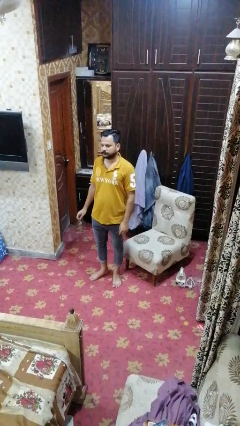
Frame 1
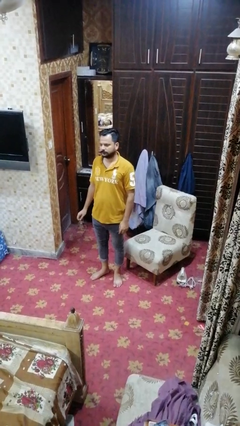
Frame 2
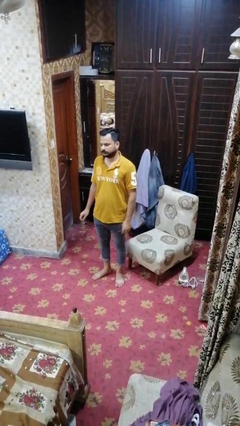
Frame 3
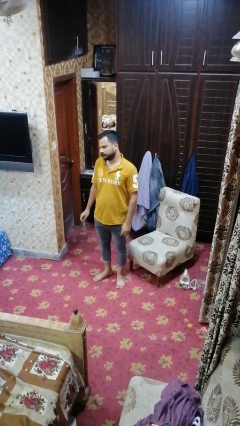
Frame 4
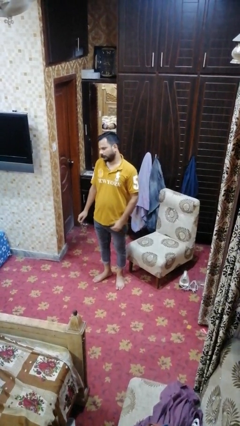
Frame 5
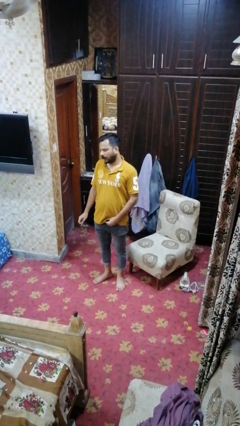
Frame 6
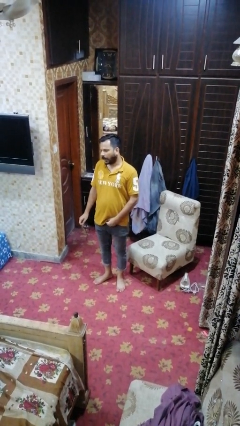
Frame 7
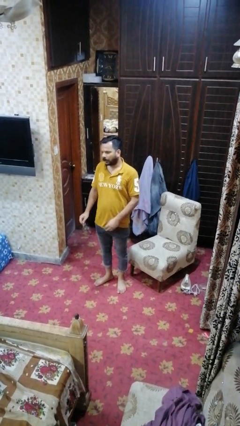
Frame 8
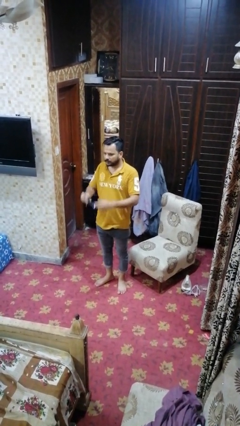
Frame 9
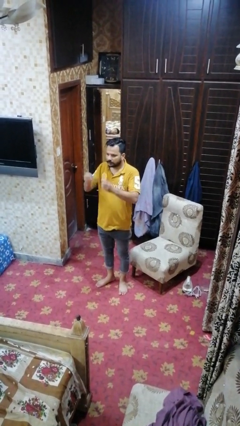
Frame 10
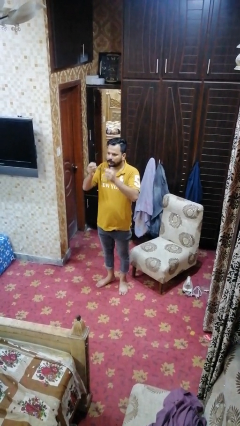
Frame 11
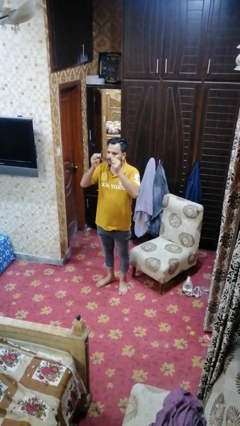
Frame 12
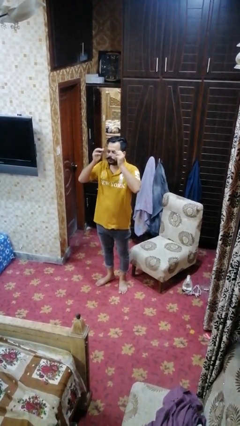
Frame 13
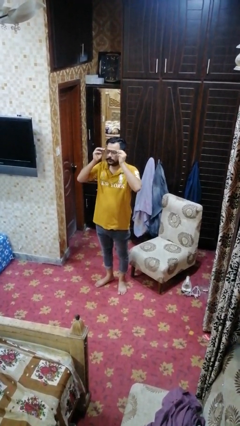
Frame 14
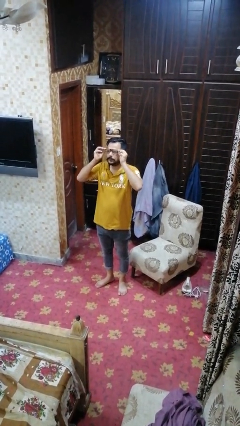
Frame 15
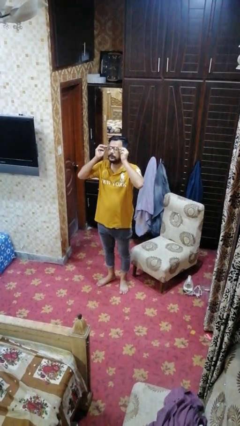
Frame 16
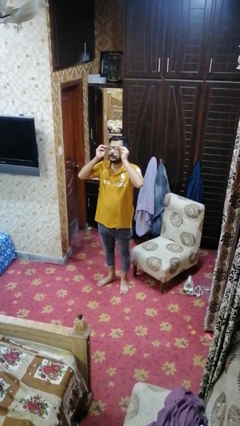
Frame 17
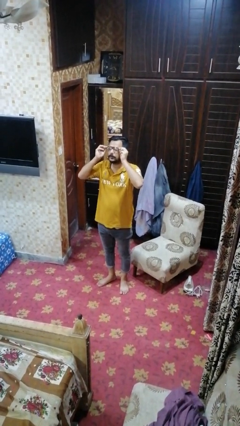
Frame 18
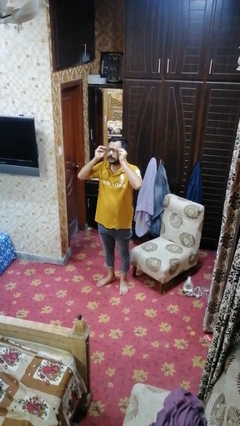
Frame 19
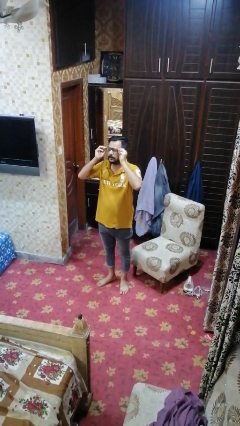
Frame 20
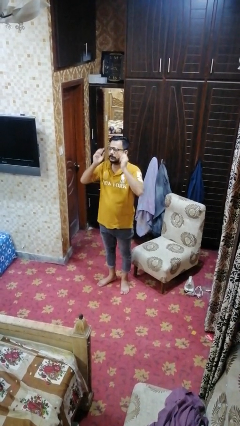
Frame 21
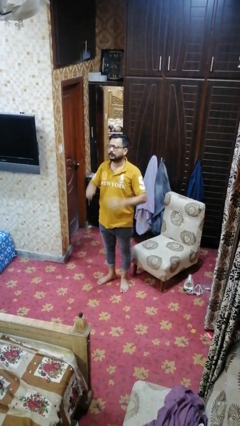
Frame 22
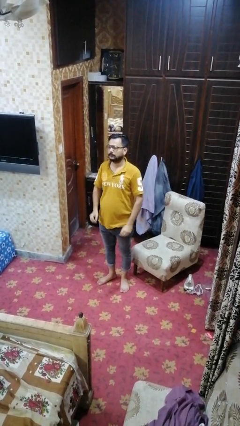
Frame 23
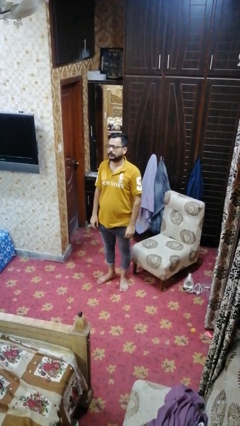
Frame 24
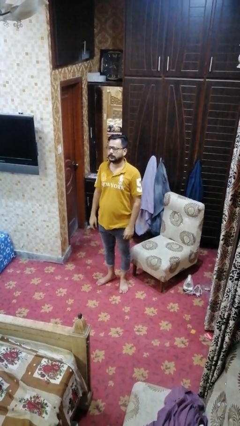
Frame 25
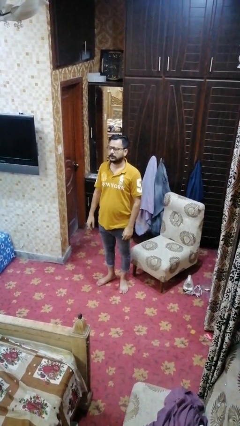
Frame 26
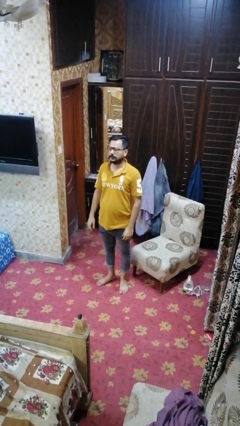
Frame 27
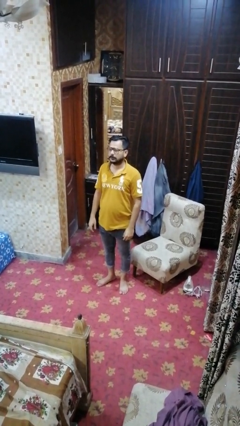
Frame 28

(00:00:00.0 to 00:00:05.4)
person puts on glasses
